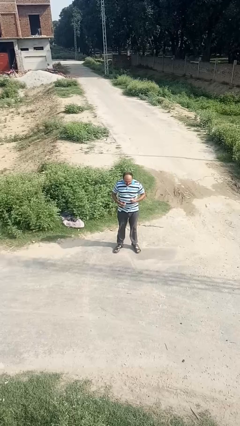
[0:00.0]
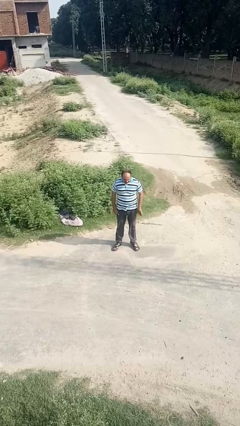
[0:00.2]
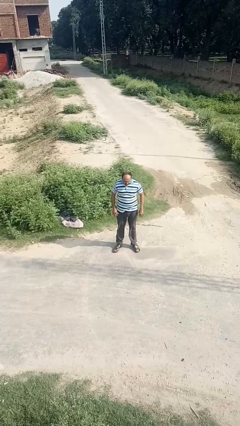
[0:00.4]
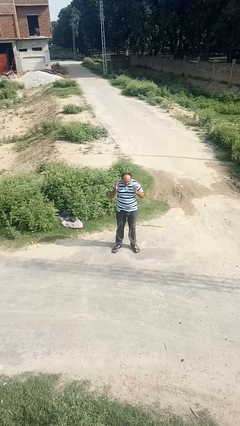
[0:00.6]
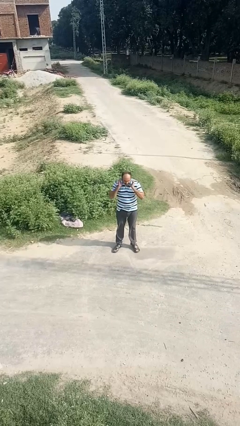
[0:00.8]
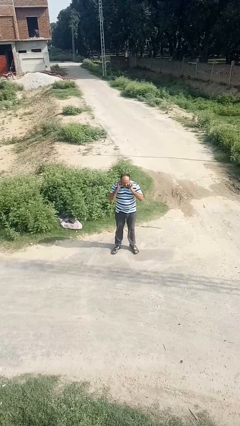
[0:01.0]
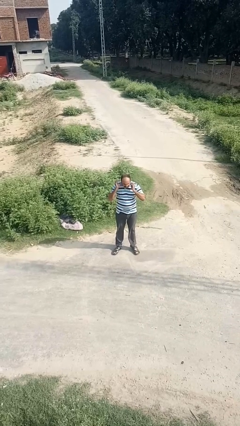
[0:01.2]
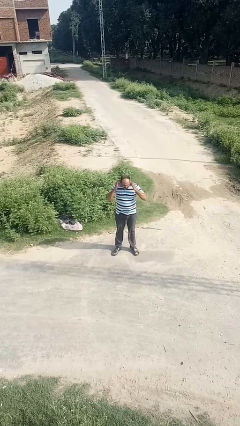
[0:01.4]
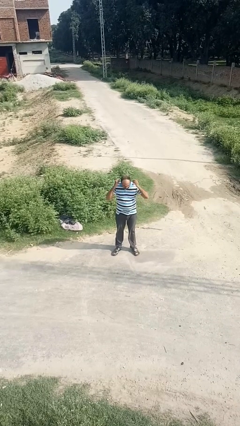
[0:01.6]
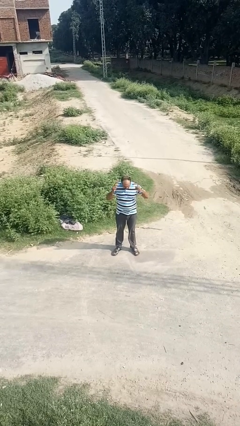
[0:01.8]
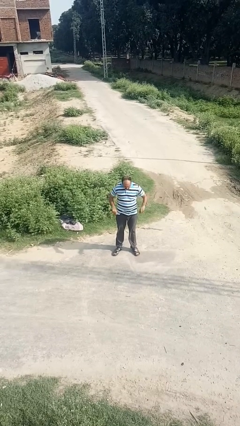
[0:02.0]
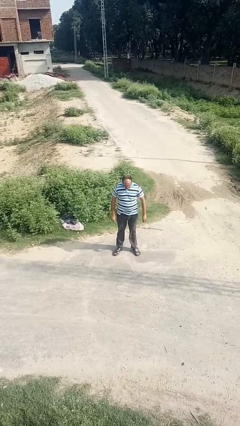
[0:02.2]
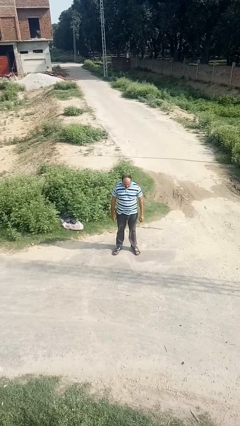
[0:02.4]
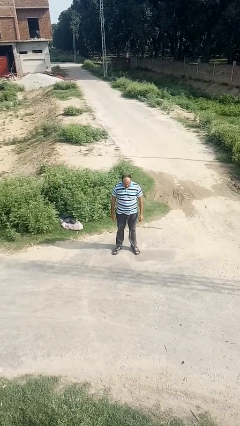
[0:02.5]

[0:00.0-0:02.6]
person takes off earrings

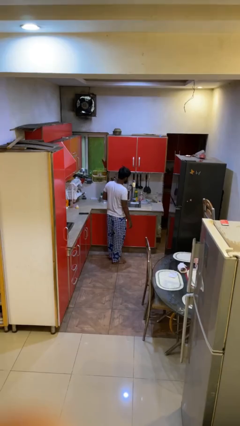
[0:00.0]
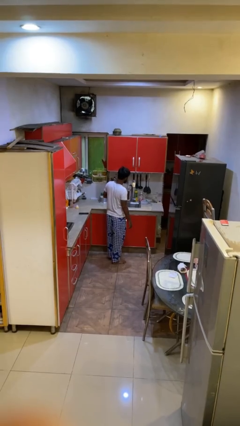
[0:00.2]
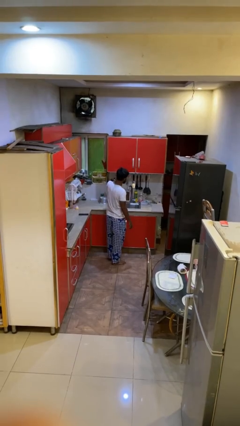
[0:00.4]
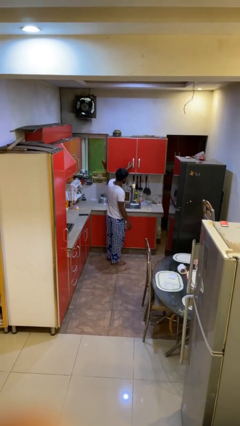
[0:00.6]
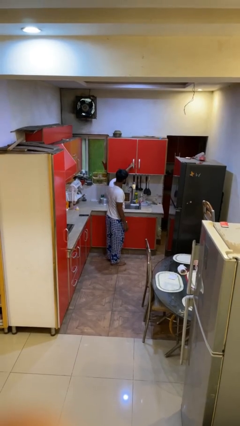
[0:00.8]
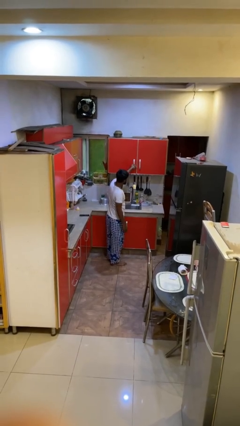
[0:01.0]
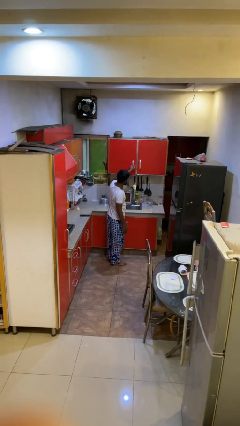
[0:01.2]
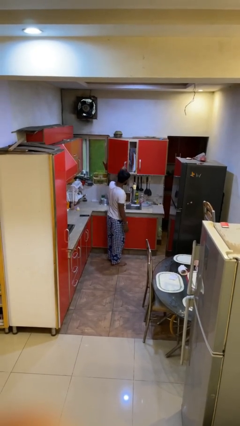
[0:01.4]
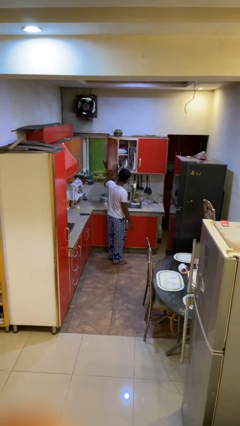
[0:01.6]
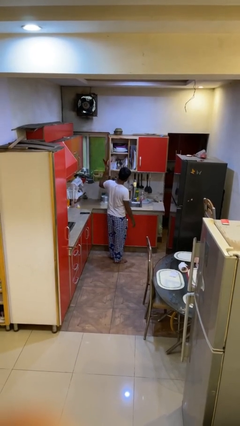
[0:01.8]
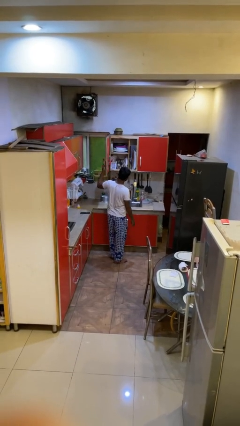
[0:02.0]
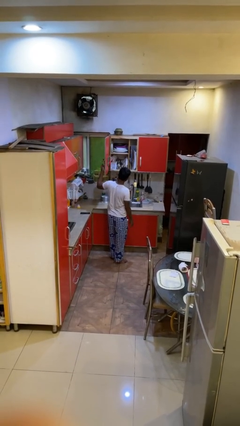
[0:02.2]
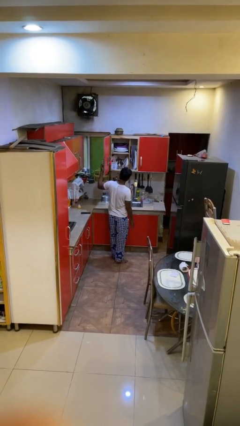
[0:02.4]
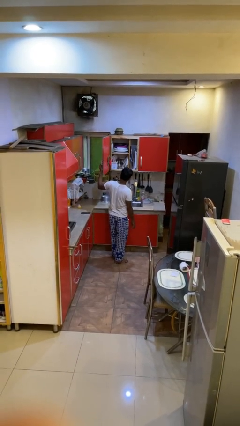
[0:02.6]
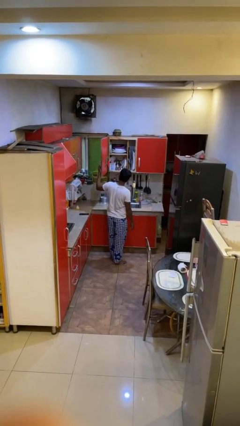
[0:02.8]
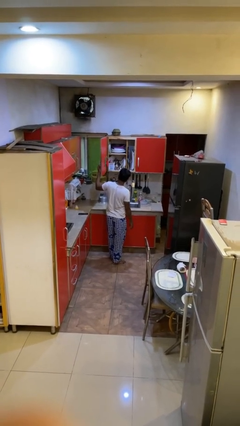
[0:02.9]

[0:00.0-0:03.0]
person opens cabinet

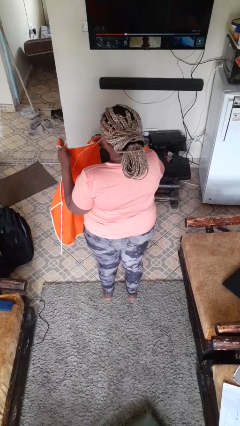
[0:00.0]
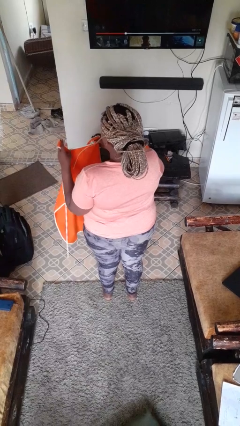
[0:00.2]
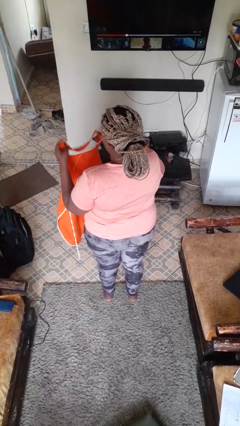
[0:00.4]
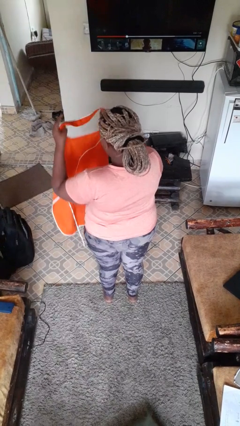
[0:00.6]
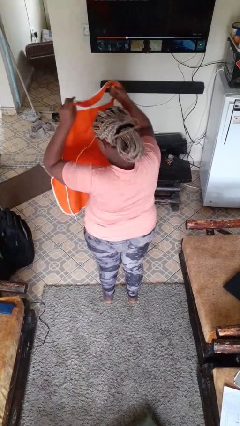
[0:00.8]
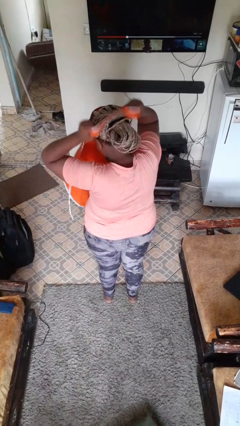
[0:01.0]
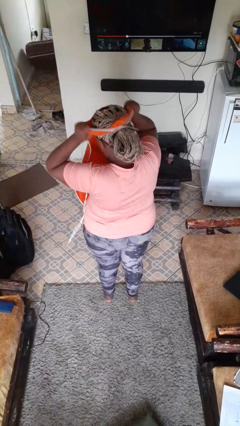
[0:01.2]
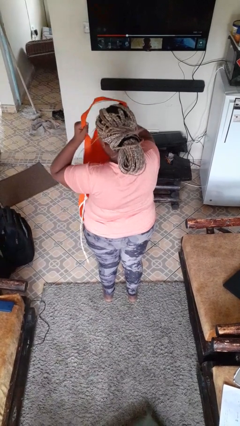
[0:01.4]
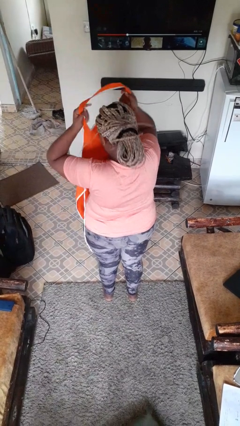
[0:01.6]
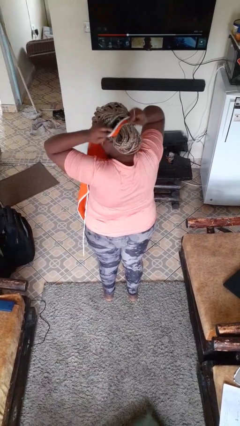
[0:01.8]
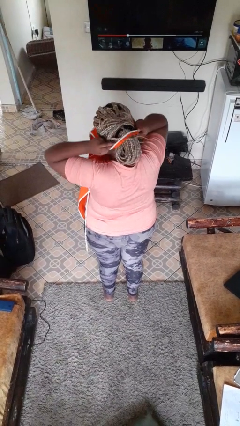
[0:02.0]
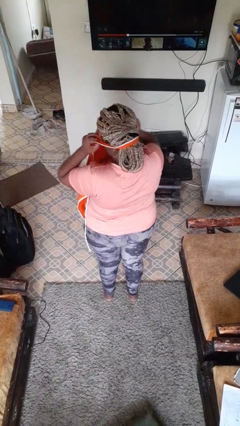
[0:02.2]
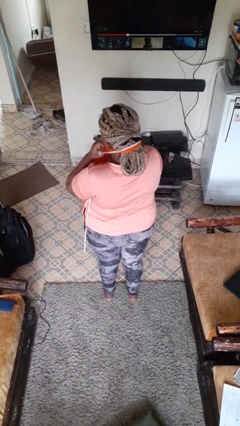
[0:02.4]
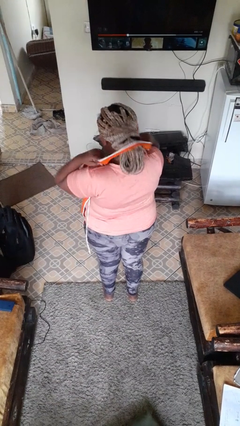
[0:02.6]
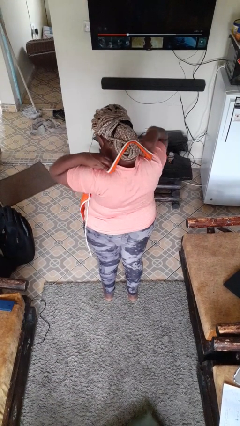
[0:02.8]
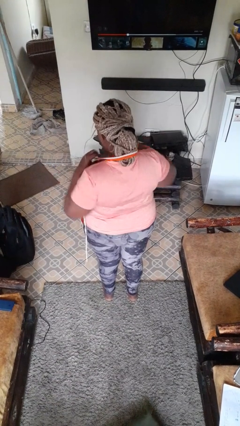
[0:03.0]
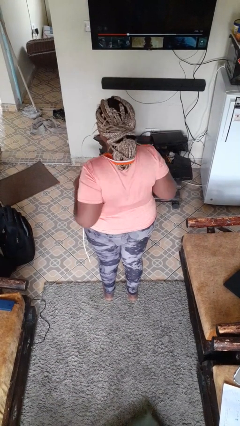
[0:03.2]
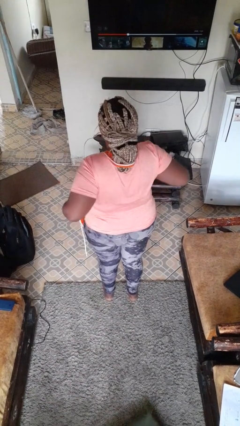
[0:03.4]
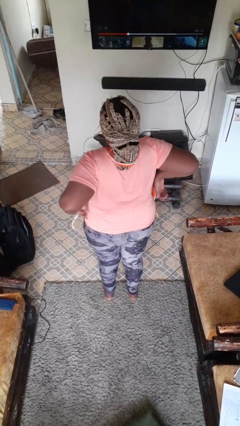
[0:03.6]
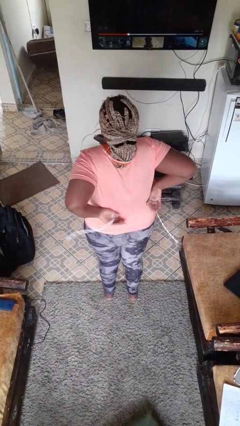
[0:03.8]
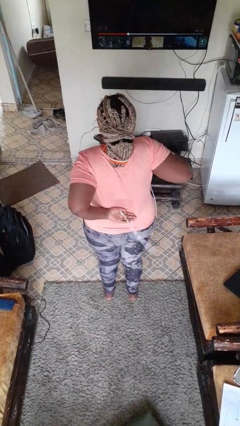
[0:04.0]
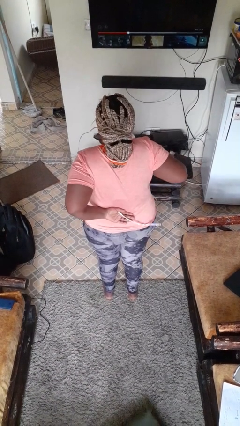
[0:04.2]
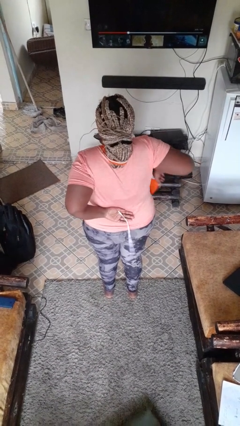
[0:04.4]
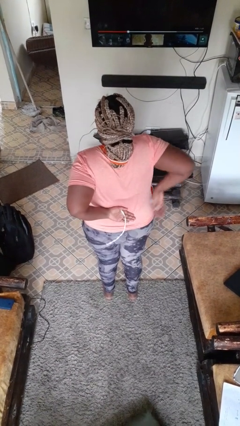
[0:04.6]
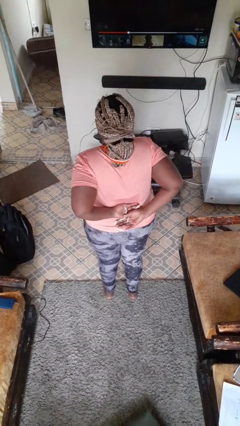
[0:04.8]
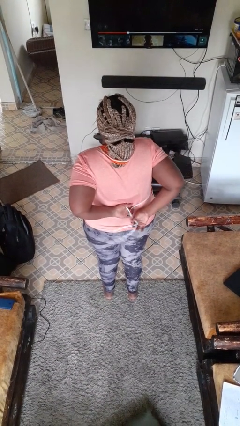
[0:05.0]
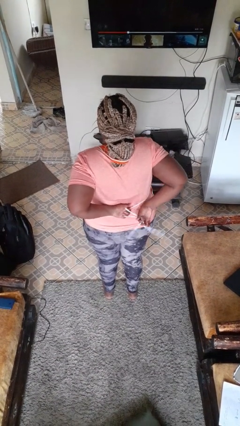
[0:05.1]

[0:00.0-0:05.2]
person puts on apron

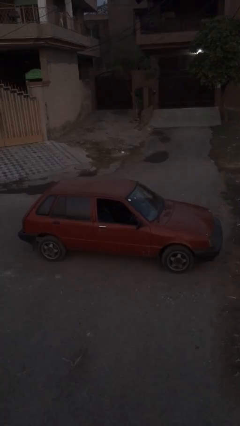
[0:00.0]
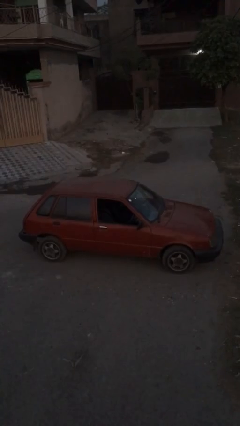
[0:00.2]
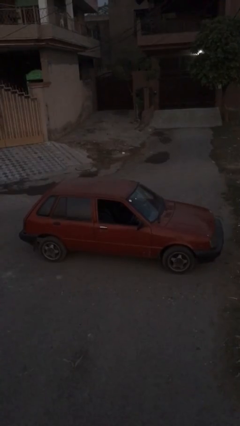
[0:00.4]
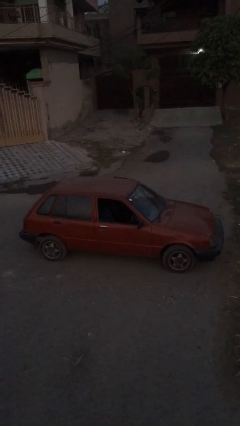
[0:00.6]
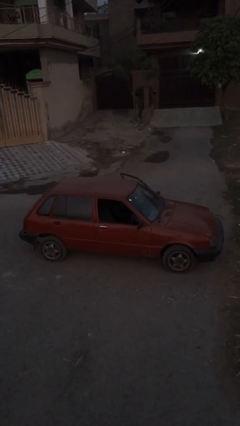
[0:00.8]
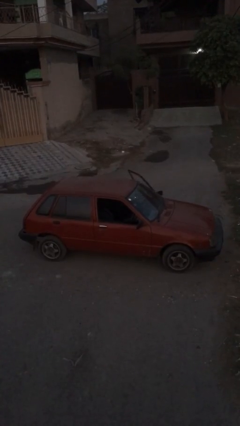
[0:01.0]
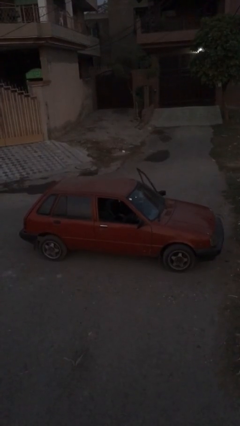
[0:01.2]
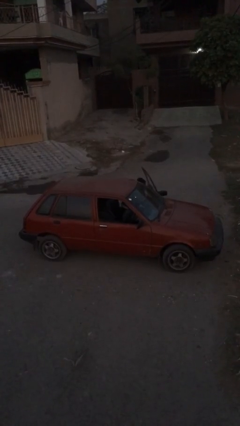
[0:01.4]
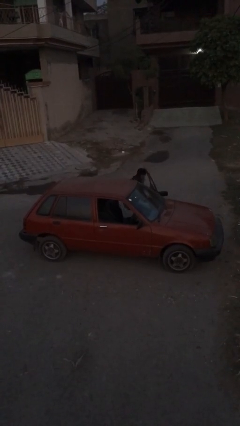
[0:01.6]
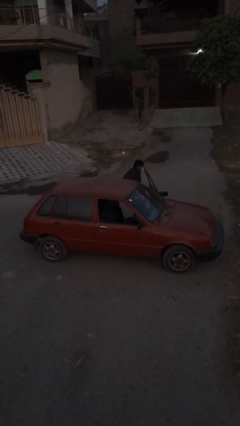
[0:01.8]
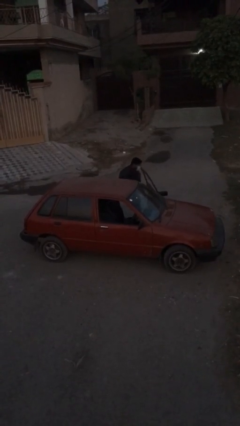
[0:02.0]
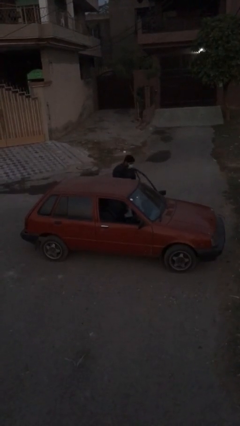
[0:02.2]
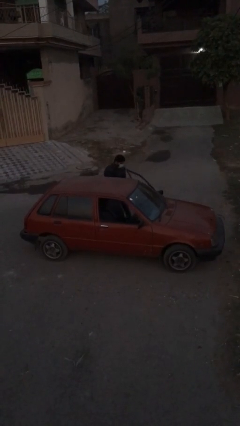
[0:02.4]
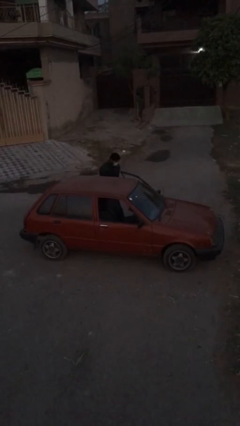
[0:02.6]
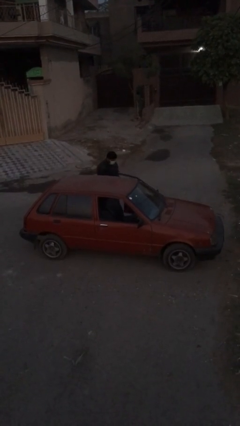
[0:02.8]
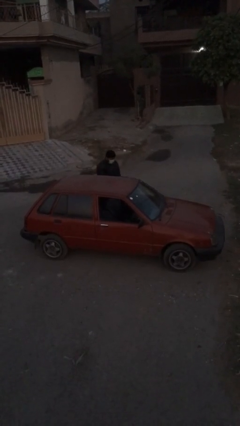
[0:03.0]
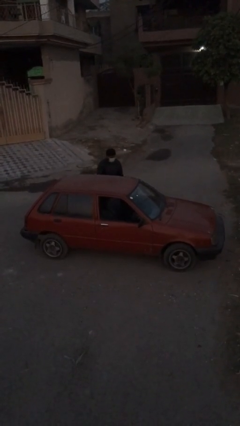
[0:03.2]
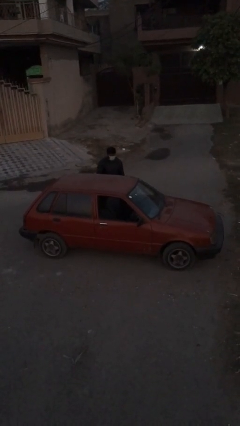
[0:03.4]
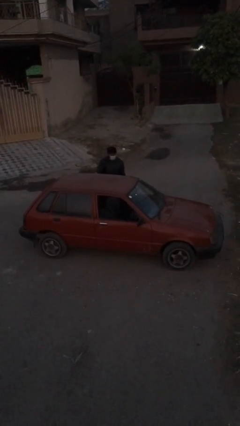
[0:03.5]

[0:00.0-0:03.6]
car drops off person

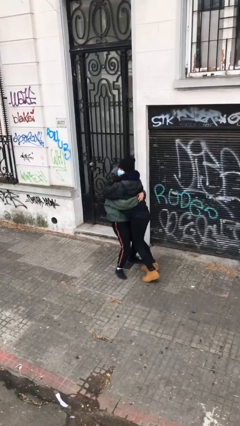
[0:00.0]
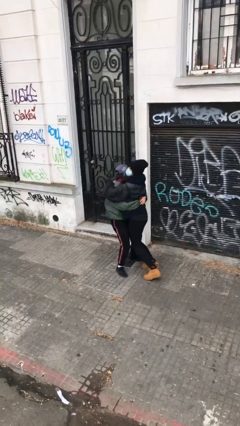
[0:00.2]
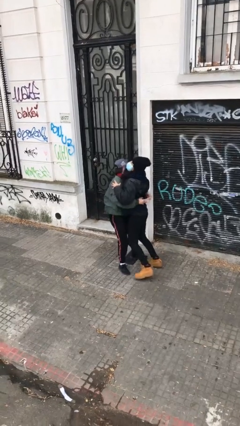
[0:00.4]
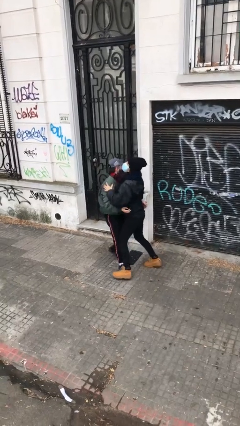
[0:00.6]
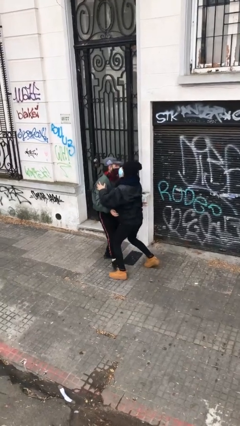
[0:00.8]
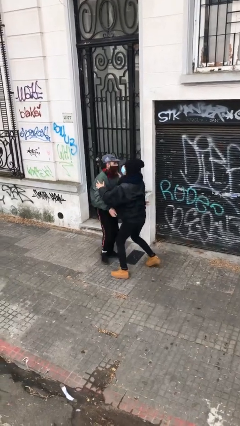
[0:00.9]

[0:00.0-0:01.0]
person puts down person

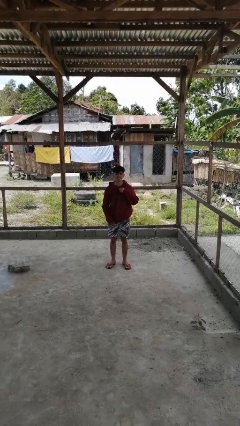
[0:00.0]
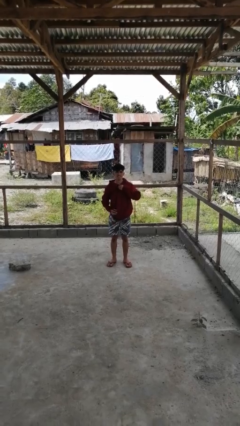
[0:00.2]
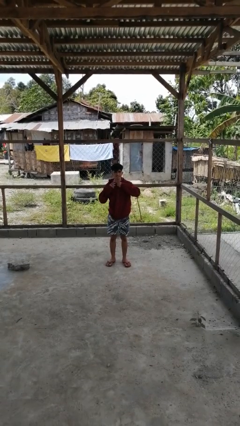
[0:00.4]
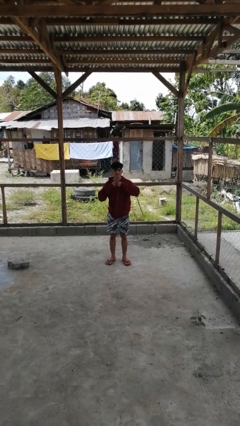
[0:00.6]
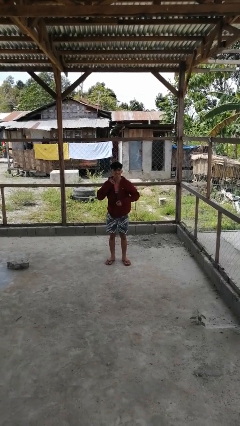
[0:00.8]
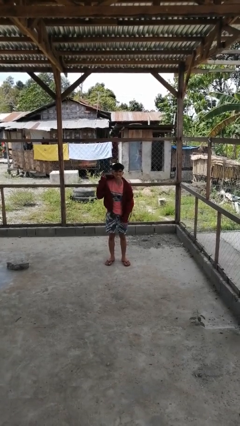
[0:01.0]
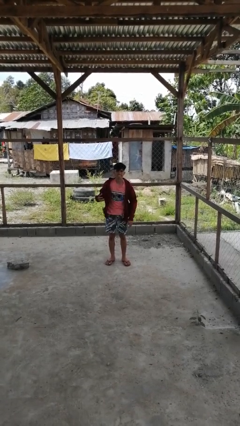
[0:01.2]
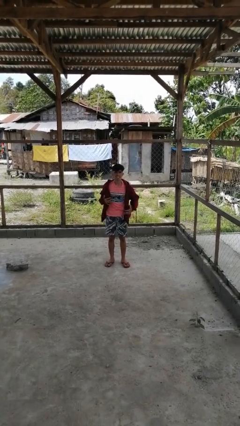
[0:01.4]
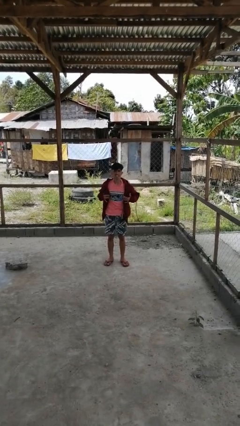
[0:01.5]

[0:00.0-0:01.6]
person unzips jacket

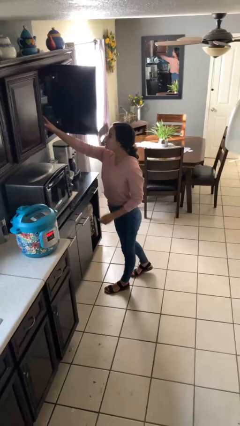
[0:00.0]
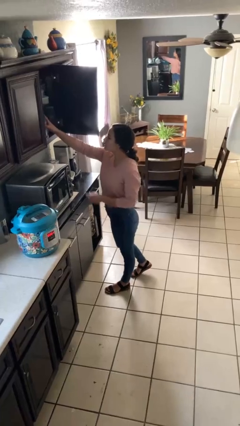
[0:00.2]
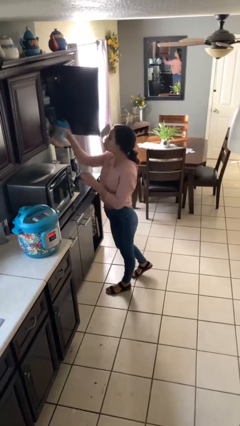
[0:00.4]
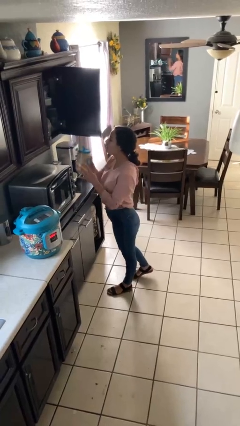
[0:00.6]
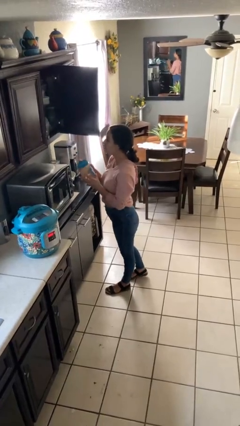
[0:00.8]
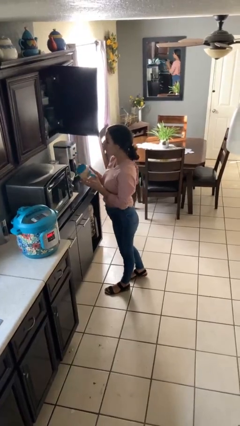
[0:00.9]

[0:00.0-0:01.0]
person picks up object from cabinet
